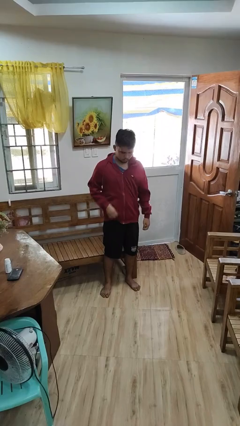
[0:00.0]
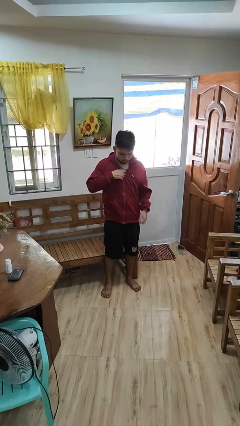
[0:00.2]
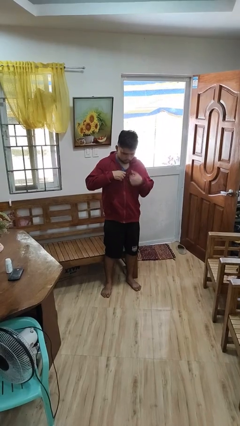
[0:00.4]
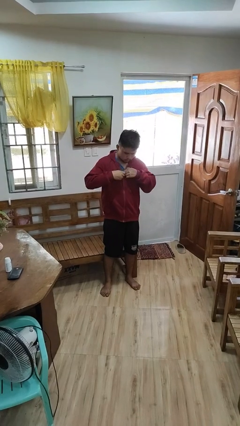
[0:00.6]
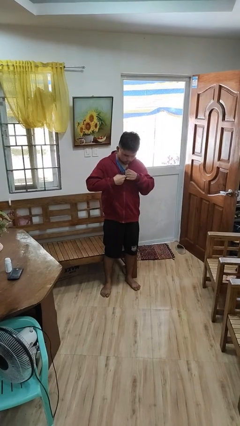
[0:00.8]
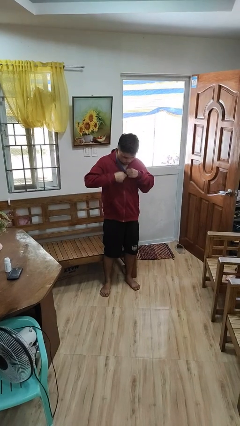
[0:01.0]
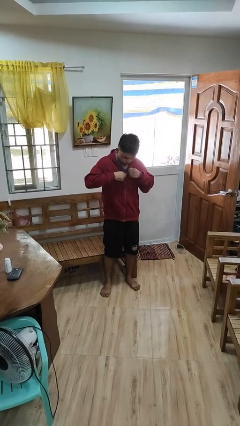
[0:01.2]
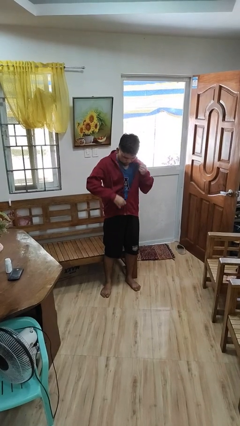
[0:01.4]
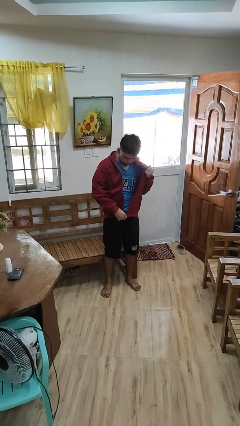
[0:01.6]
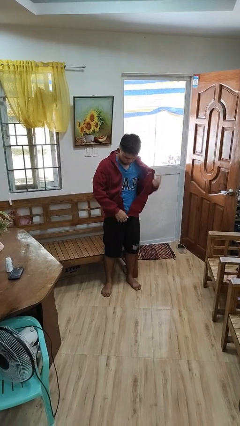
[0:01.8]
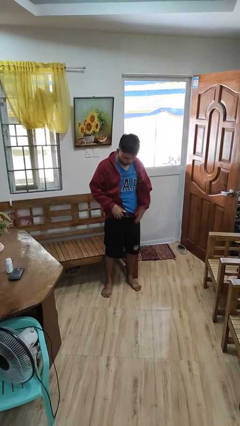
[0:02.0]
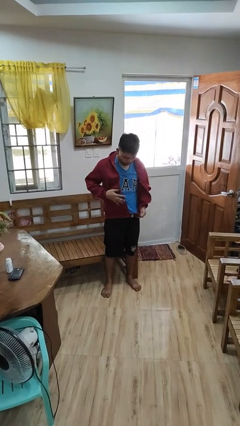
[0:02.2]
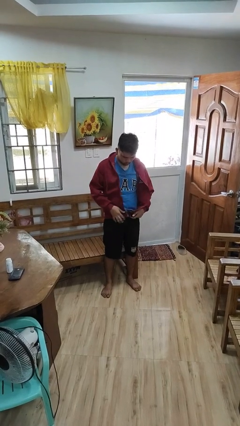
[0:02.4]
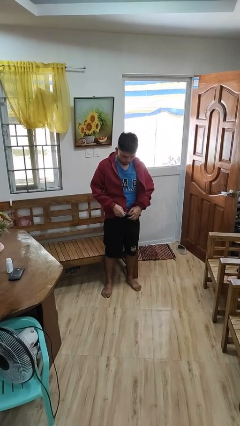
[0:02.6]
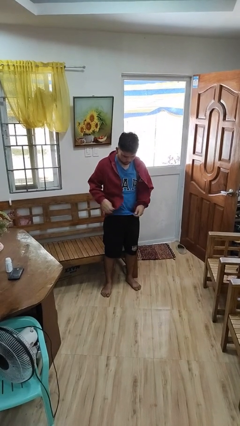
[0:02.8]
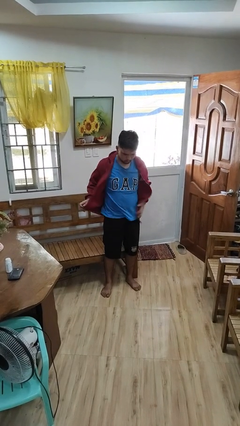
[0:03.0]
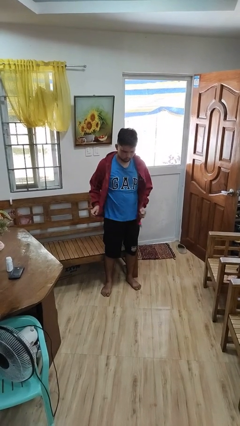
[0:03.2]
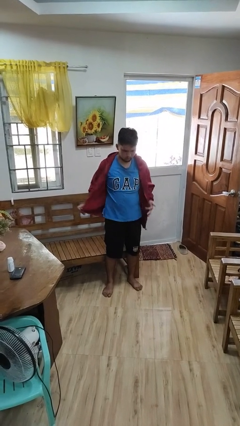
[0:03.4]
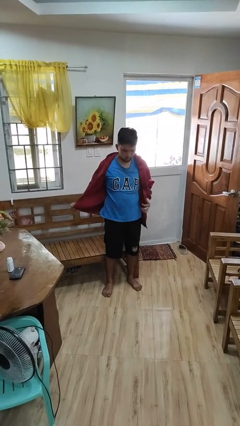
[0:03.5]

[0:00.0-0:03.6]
person unzips jacket

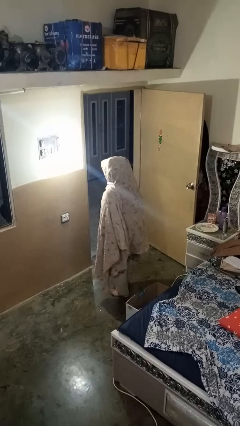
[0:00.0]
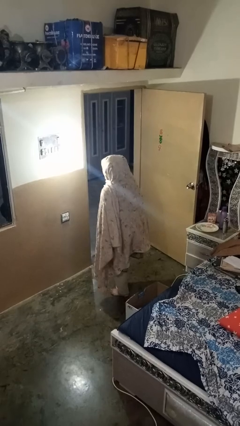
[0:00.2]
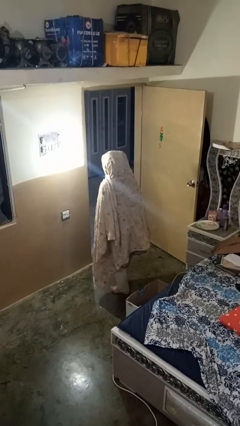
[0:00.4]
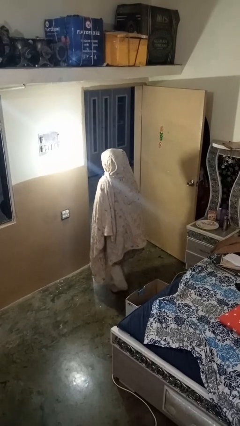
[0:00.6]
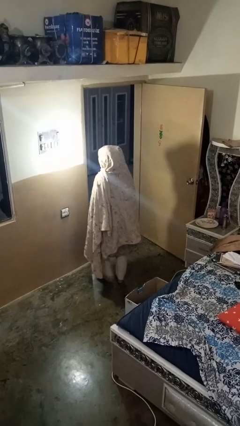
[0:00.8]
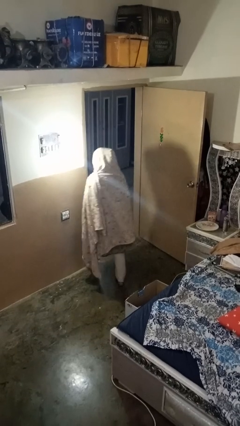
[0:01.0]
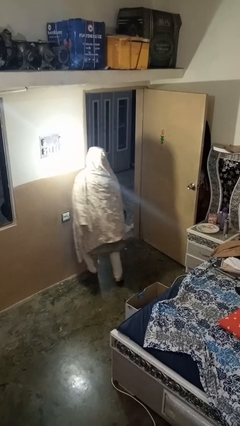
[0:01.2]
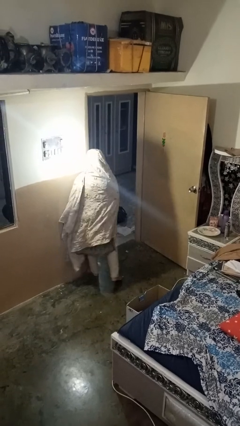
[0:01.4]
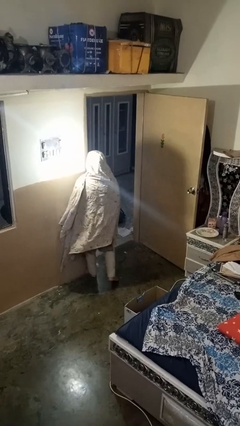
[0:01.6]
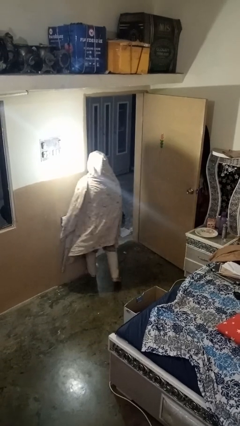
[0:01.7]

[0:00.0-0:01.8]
person bumps into wall

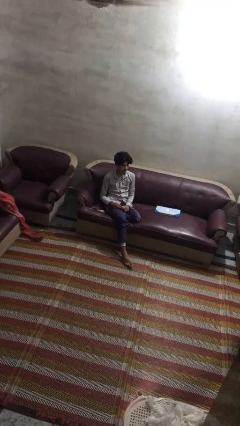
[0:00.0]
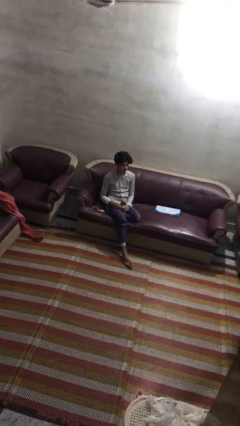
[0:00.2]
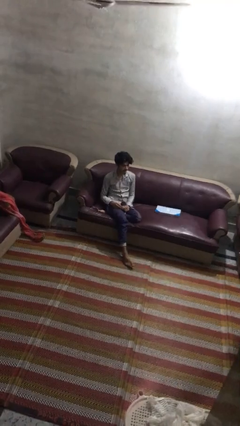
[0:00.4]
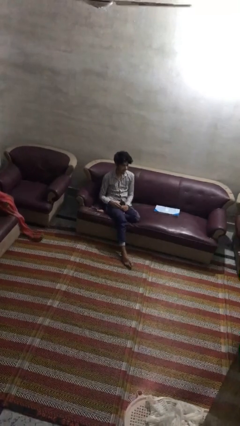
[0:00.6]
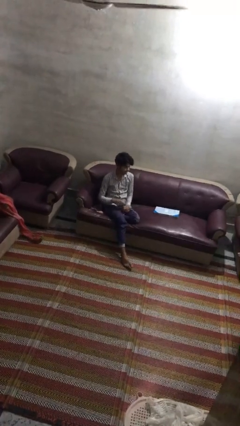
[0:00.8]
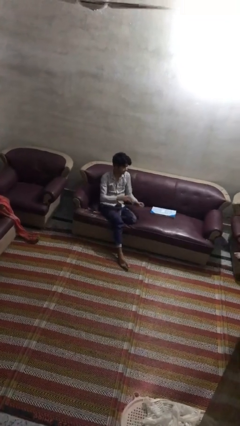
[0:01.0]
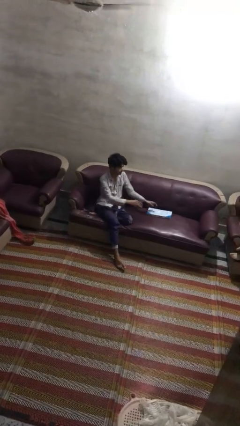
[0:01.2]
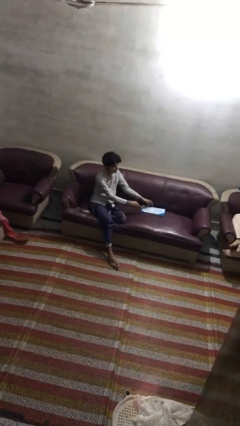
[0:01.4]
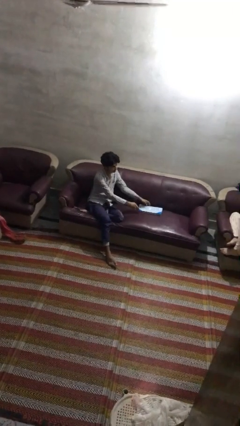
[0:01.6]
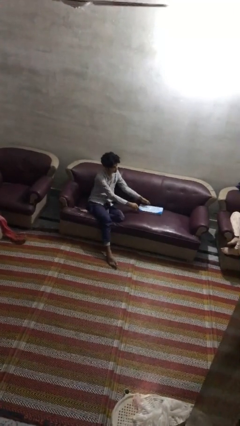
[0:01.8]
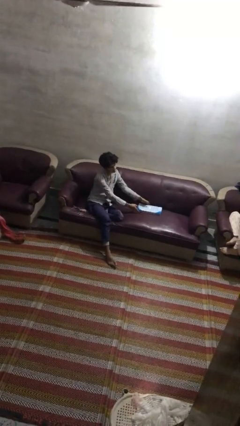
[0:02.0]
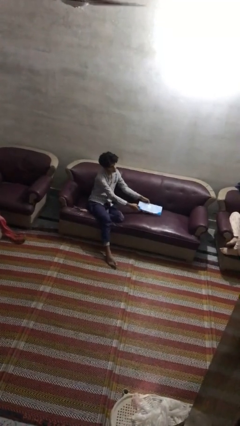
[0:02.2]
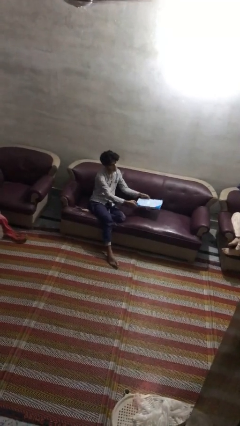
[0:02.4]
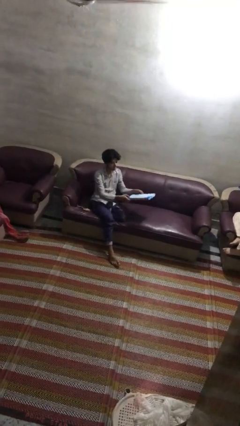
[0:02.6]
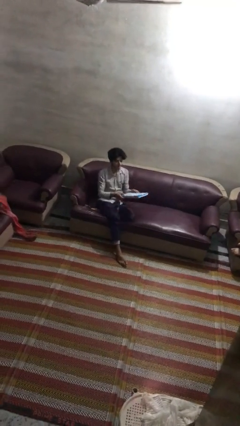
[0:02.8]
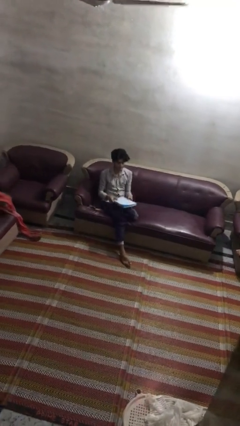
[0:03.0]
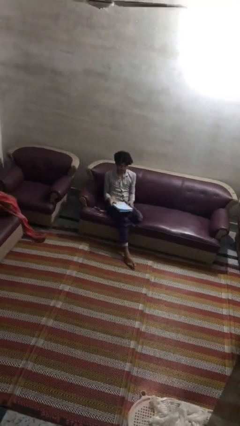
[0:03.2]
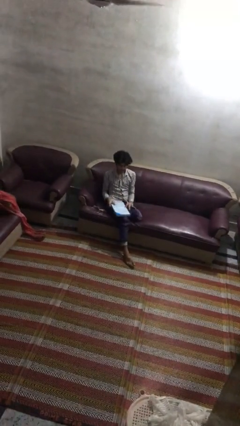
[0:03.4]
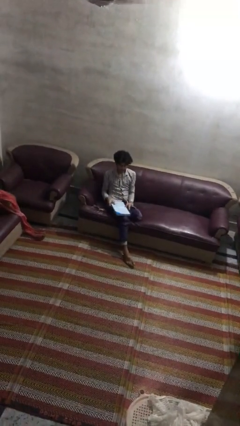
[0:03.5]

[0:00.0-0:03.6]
person picks up object from couch

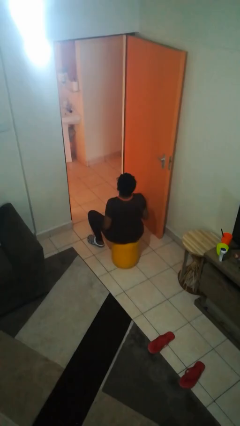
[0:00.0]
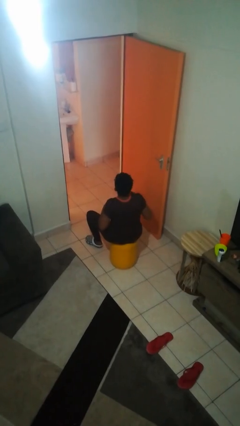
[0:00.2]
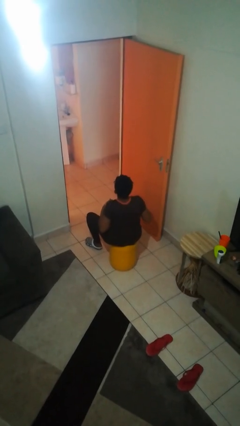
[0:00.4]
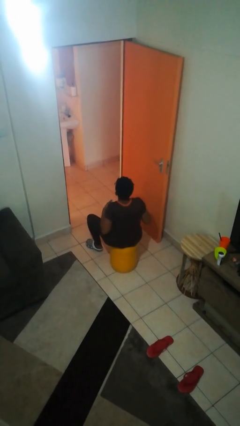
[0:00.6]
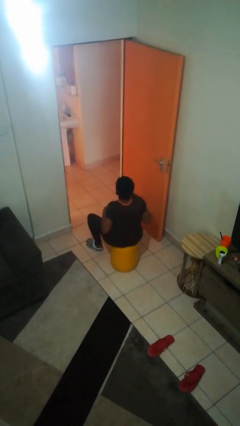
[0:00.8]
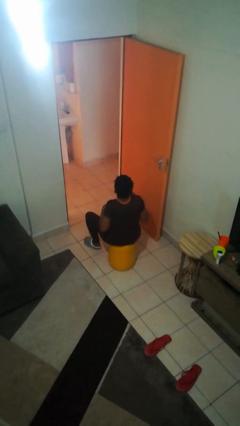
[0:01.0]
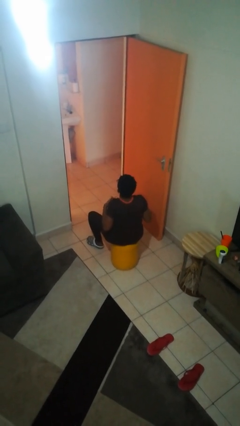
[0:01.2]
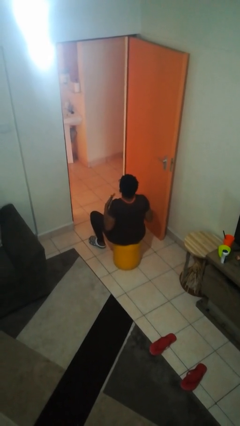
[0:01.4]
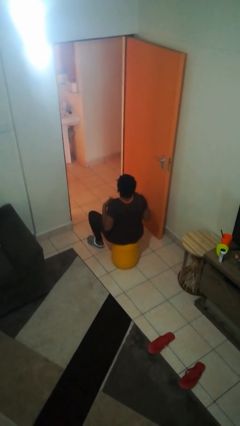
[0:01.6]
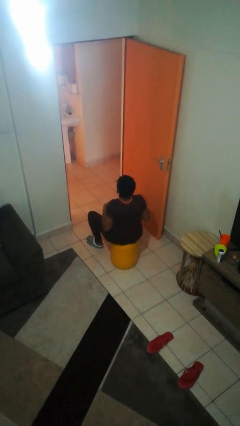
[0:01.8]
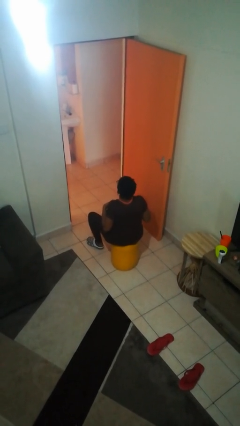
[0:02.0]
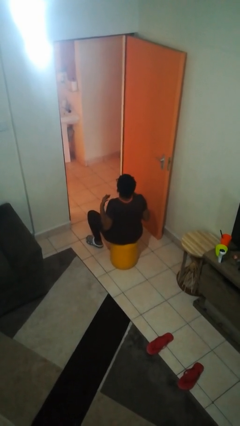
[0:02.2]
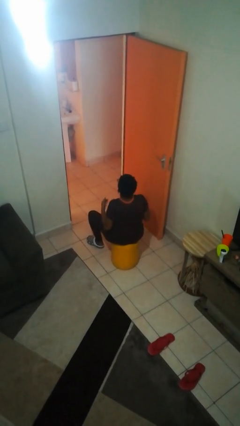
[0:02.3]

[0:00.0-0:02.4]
person drums on chest

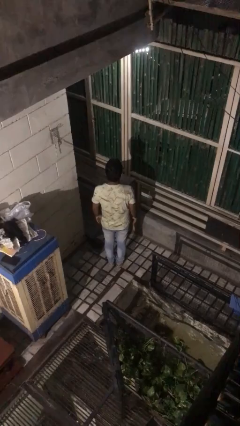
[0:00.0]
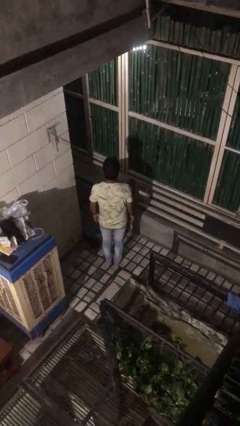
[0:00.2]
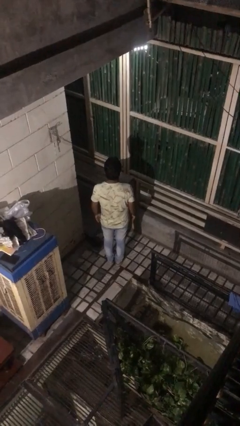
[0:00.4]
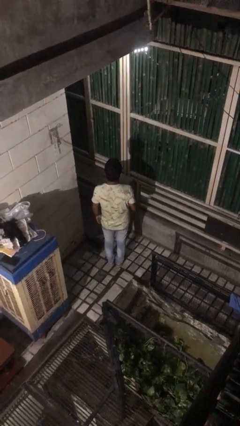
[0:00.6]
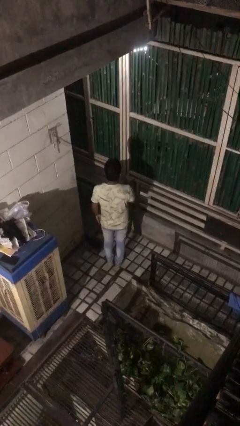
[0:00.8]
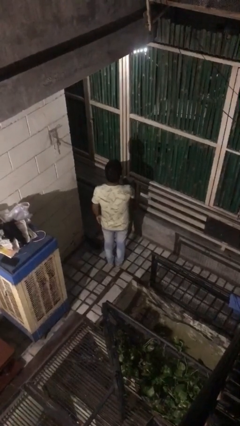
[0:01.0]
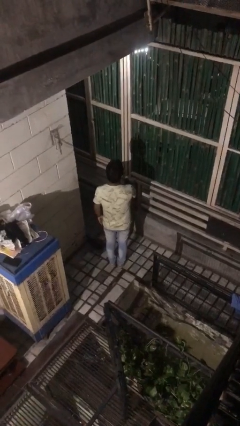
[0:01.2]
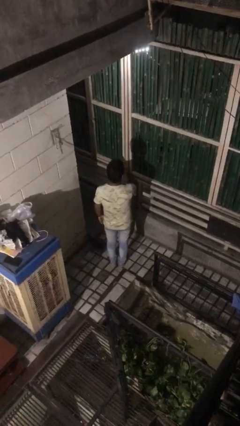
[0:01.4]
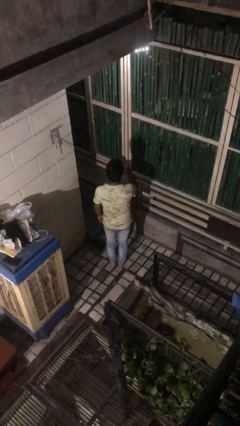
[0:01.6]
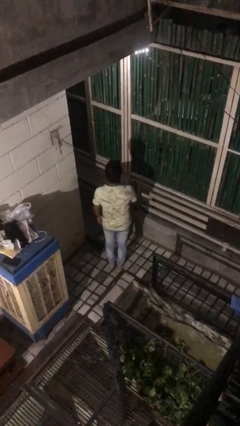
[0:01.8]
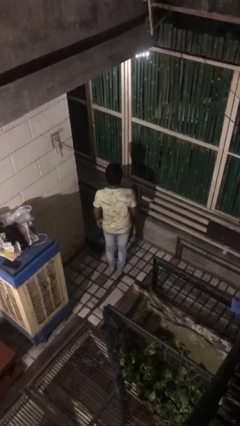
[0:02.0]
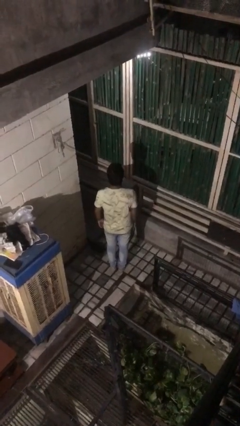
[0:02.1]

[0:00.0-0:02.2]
person gestures blow kiss

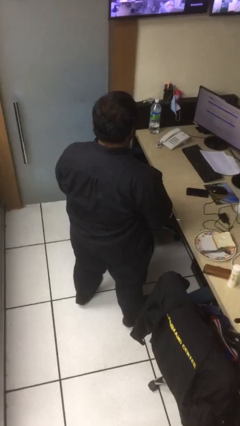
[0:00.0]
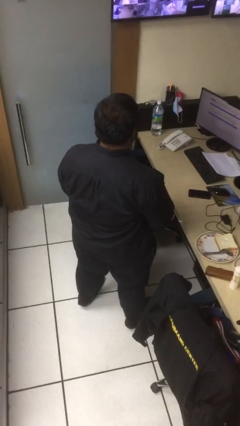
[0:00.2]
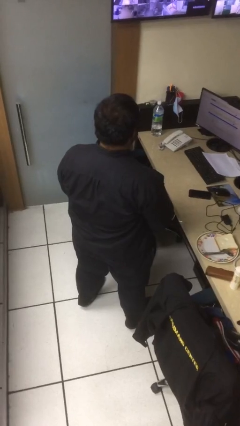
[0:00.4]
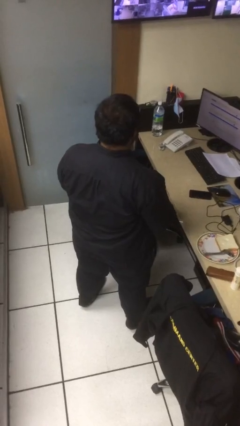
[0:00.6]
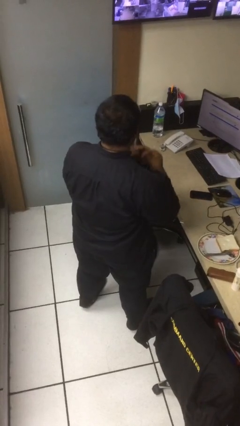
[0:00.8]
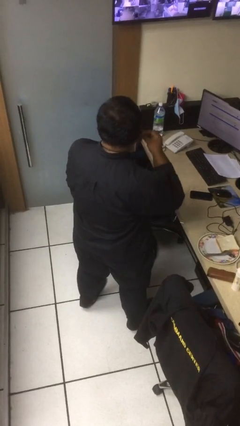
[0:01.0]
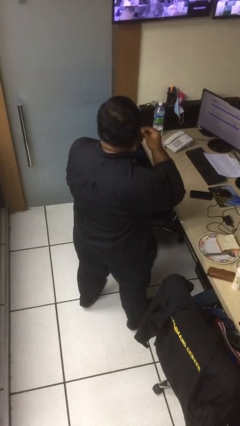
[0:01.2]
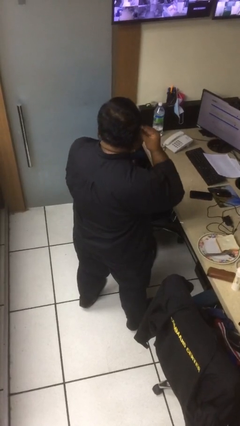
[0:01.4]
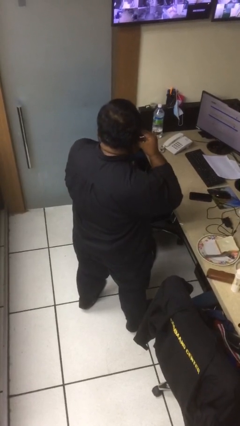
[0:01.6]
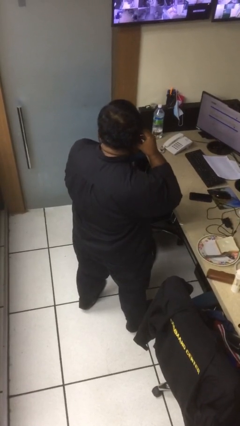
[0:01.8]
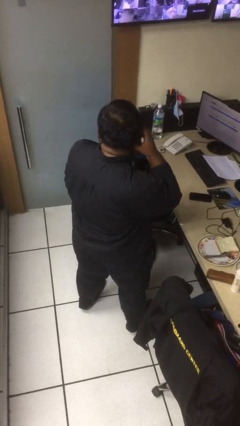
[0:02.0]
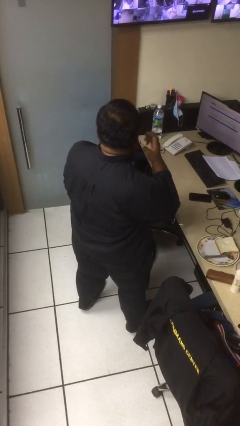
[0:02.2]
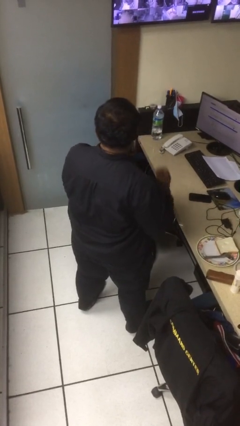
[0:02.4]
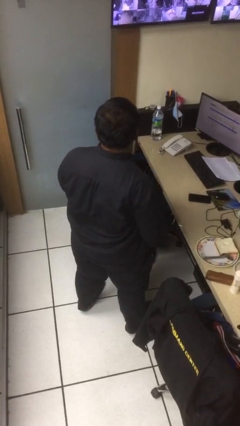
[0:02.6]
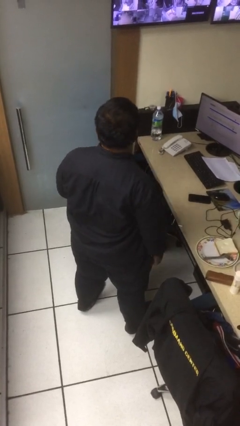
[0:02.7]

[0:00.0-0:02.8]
person puts on earrings

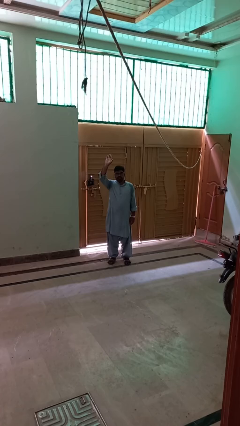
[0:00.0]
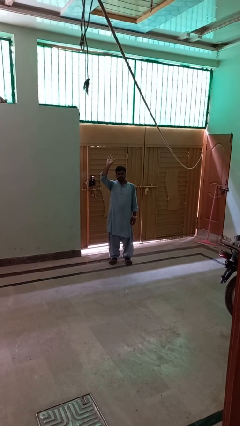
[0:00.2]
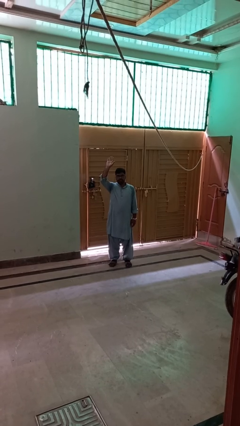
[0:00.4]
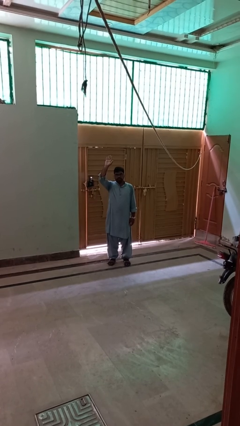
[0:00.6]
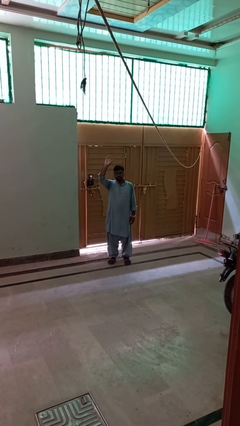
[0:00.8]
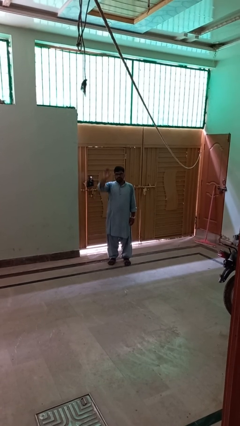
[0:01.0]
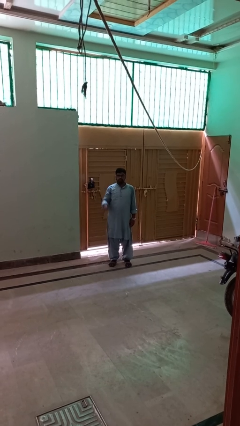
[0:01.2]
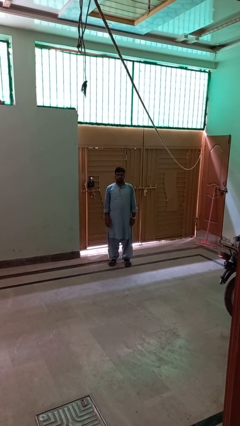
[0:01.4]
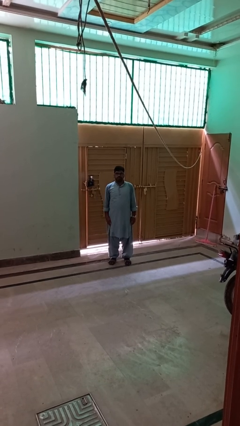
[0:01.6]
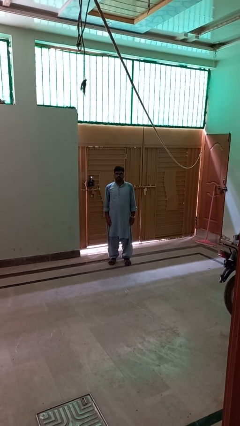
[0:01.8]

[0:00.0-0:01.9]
person gestures lower hand
